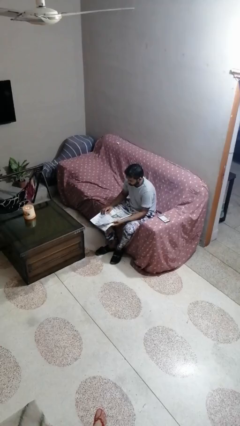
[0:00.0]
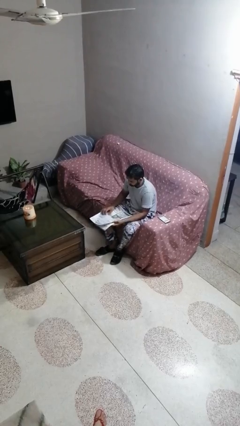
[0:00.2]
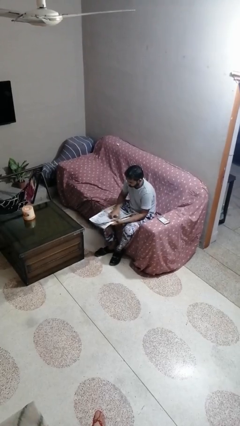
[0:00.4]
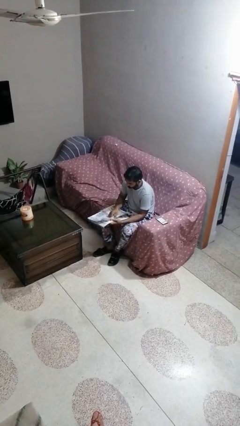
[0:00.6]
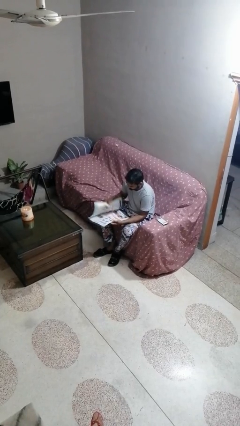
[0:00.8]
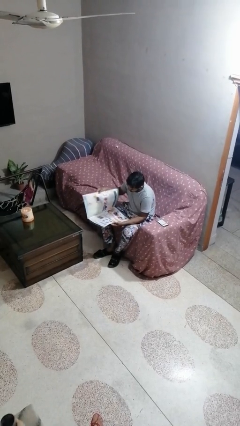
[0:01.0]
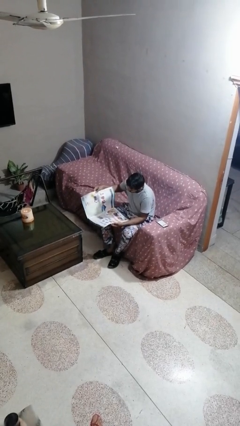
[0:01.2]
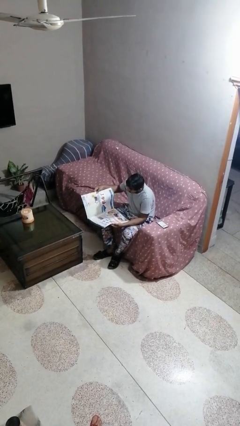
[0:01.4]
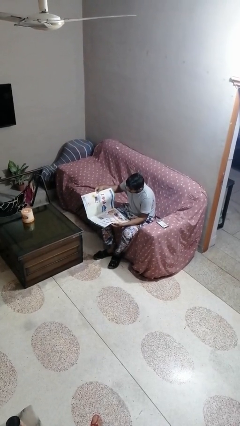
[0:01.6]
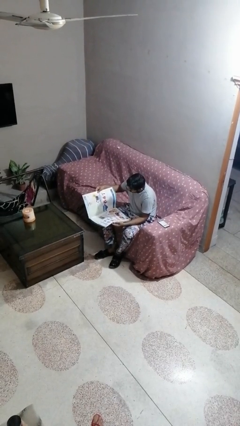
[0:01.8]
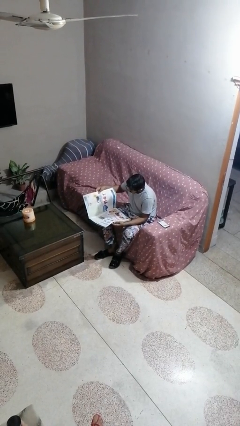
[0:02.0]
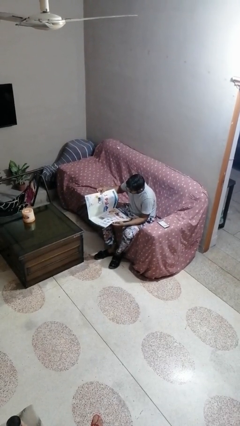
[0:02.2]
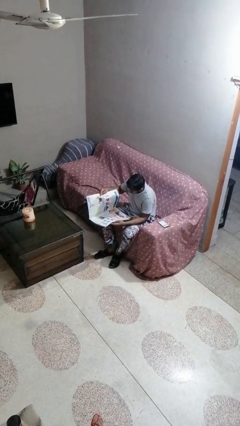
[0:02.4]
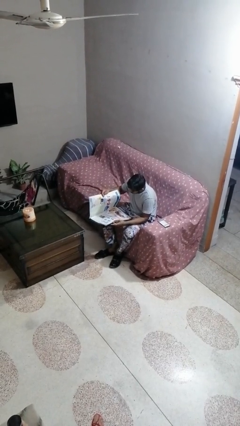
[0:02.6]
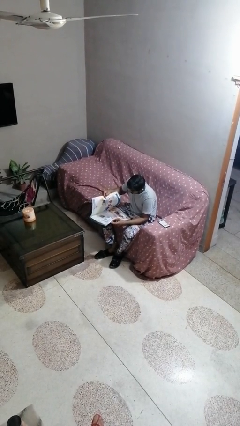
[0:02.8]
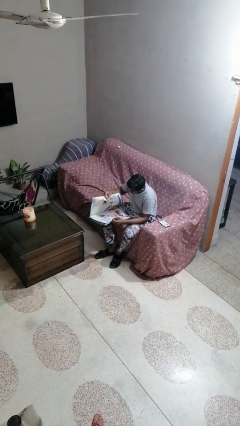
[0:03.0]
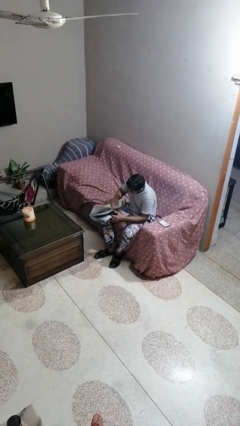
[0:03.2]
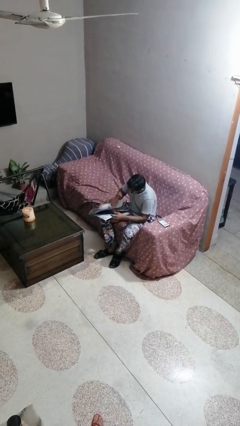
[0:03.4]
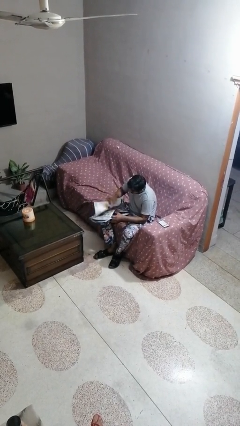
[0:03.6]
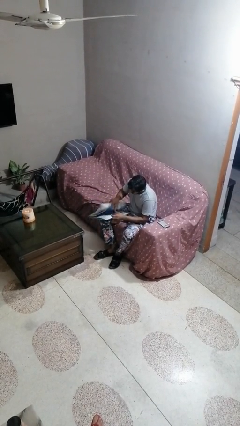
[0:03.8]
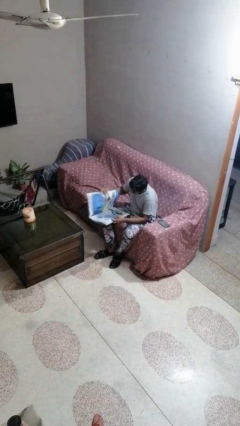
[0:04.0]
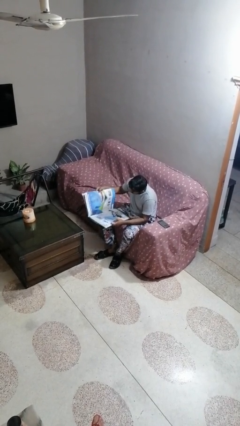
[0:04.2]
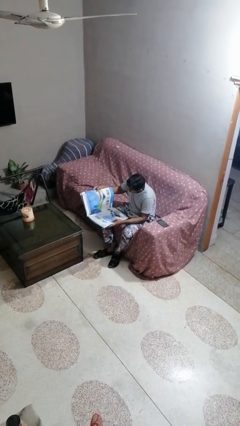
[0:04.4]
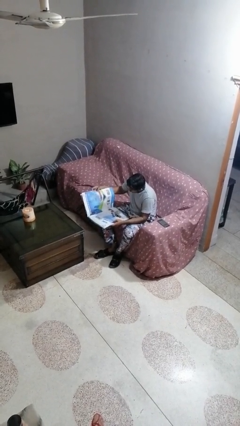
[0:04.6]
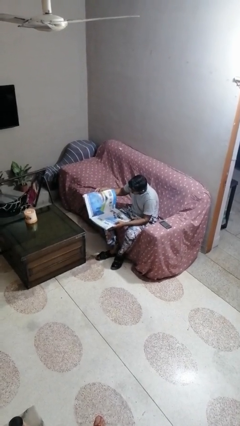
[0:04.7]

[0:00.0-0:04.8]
person reads magazine

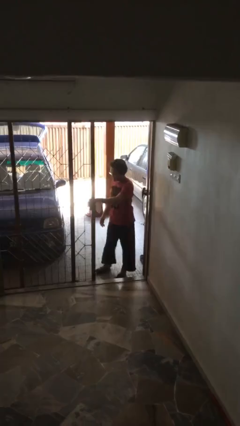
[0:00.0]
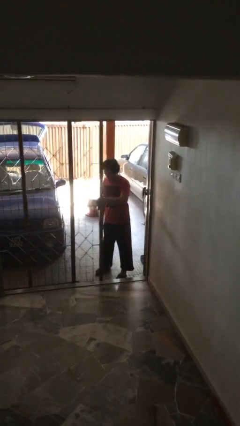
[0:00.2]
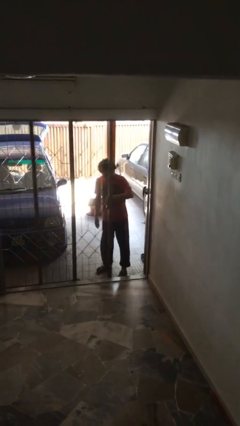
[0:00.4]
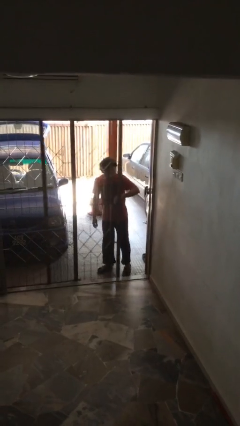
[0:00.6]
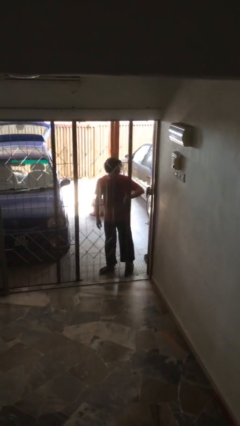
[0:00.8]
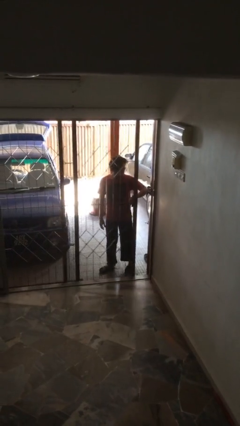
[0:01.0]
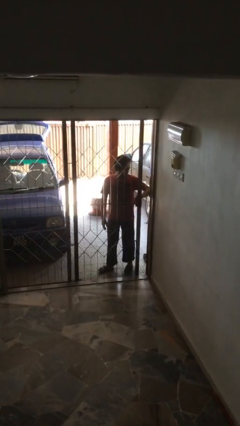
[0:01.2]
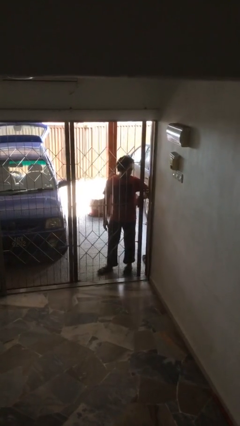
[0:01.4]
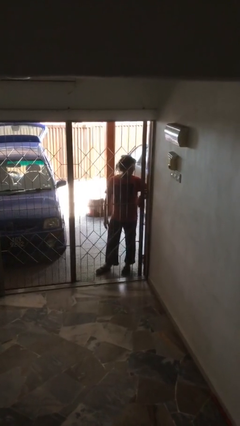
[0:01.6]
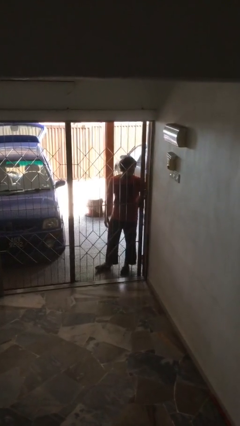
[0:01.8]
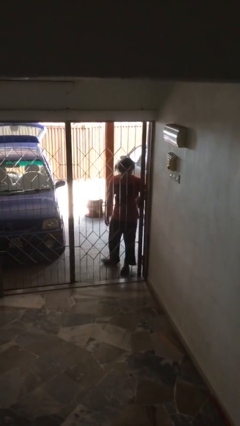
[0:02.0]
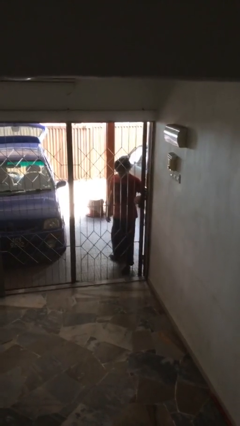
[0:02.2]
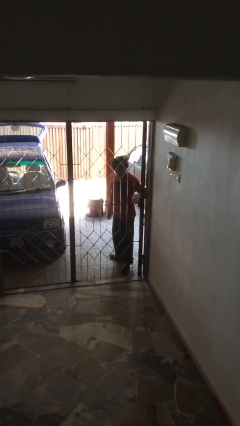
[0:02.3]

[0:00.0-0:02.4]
person closes facility door

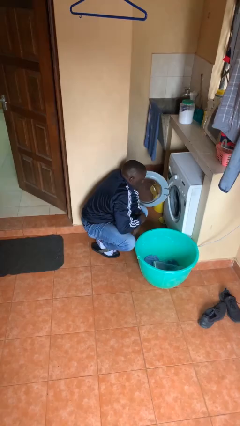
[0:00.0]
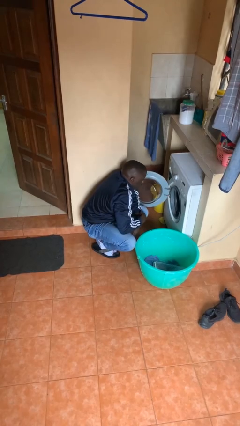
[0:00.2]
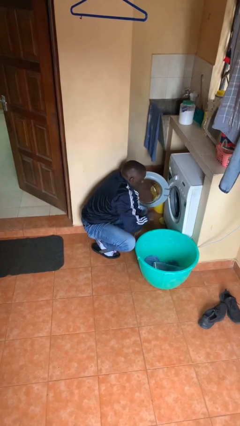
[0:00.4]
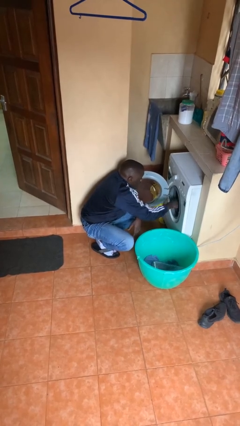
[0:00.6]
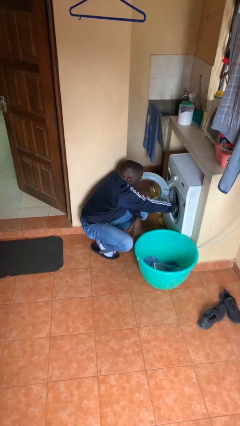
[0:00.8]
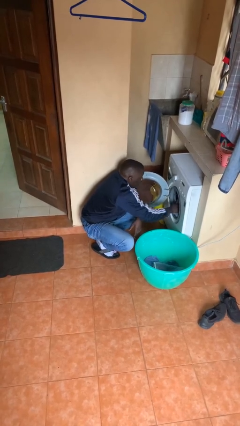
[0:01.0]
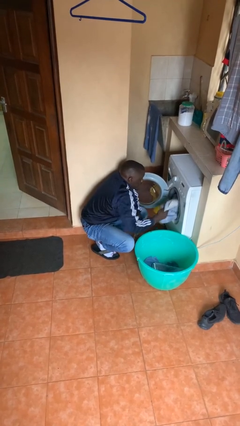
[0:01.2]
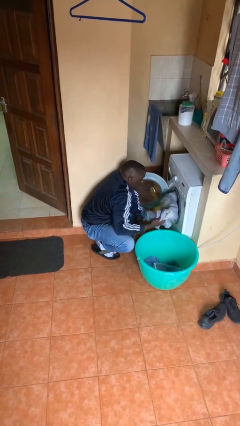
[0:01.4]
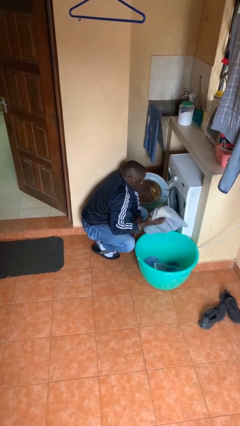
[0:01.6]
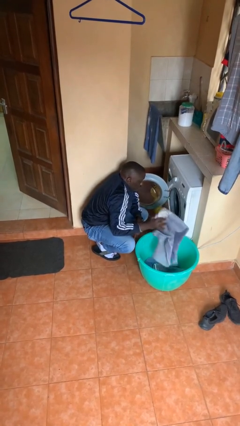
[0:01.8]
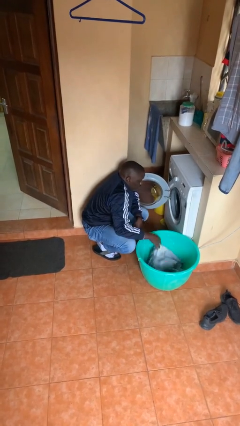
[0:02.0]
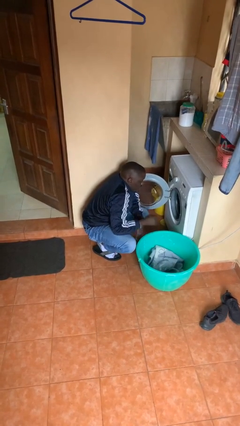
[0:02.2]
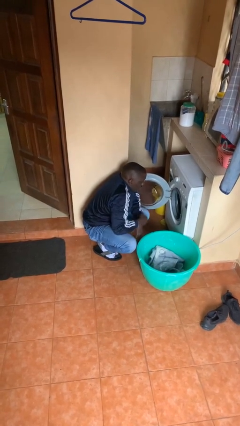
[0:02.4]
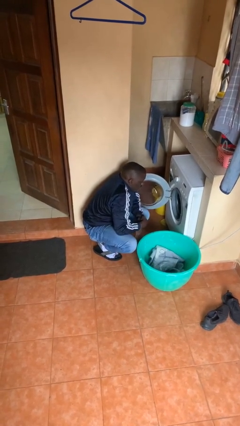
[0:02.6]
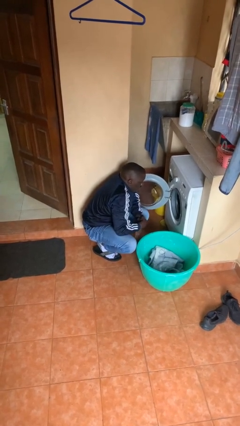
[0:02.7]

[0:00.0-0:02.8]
person loads clotheswasher

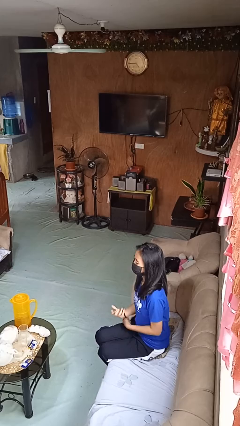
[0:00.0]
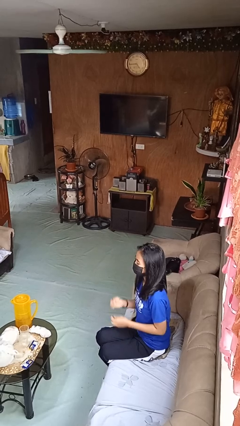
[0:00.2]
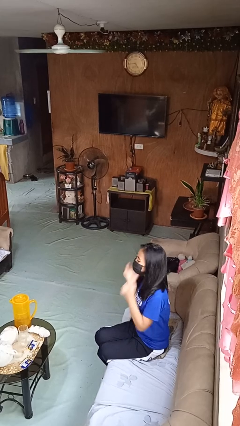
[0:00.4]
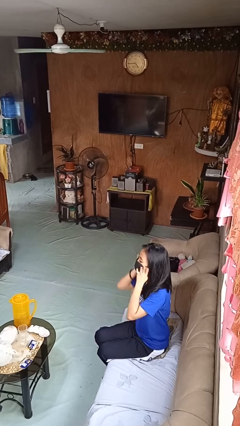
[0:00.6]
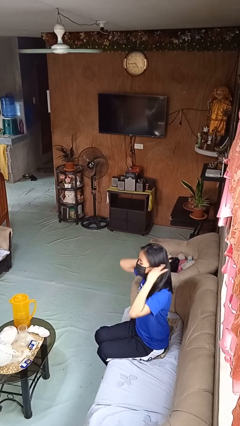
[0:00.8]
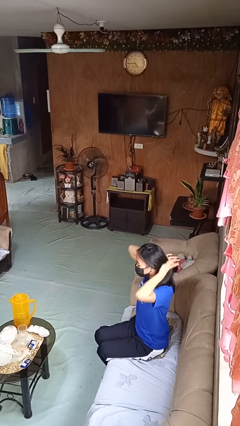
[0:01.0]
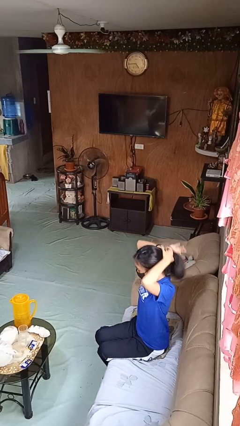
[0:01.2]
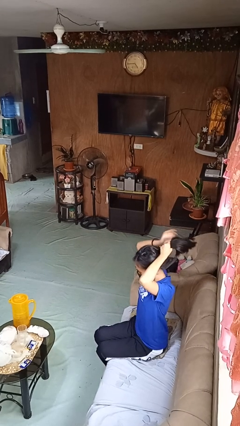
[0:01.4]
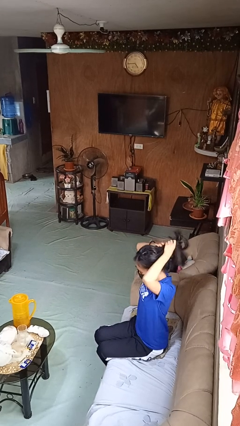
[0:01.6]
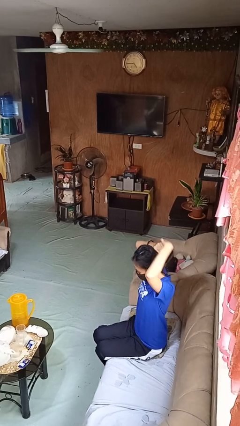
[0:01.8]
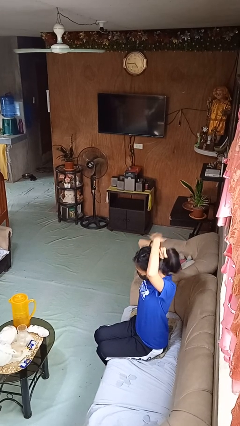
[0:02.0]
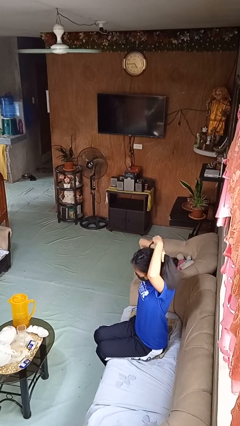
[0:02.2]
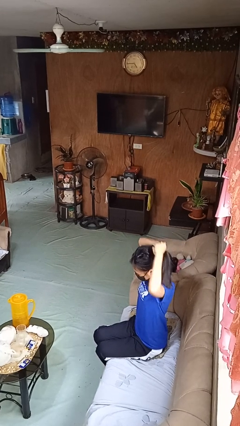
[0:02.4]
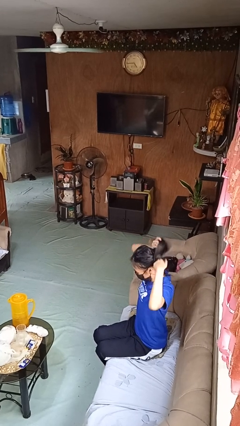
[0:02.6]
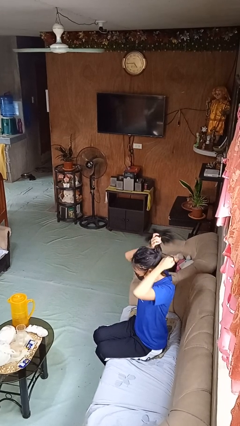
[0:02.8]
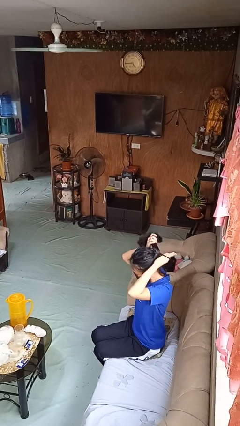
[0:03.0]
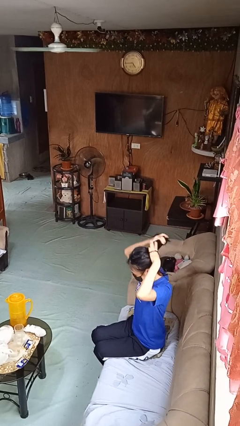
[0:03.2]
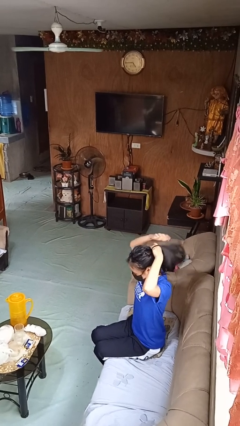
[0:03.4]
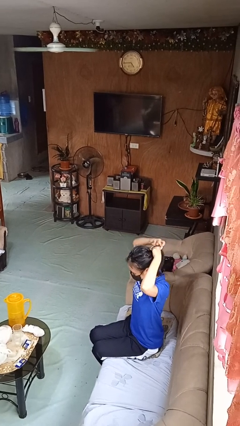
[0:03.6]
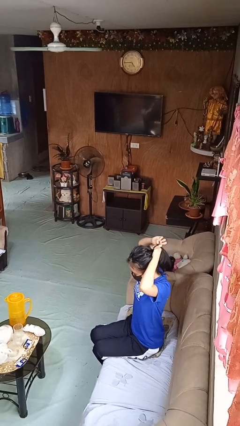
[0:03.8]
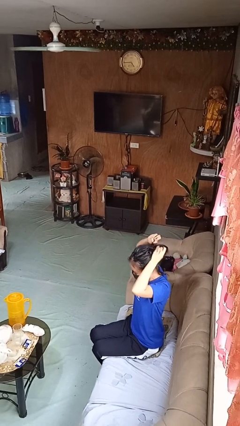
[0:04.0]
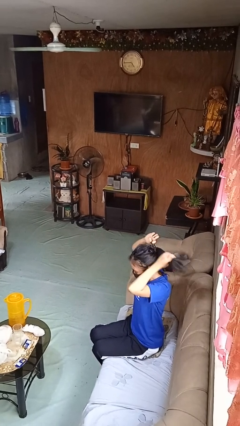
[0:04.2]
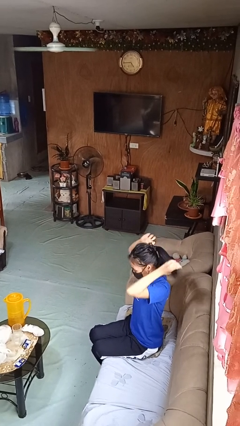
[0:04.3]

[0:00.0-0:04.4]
person puts hair in ponytail

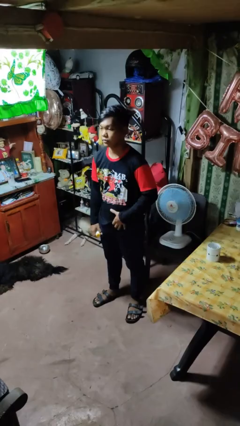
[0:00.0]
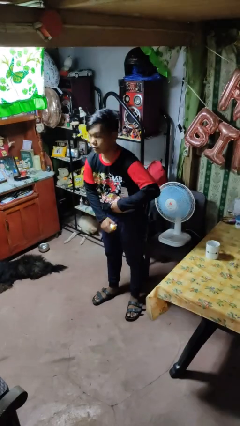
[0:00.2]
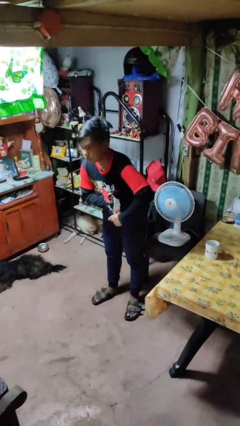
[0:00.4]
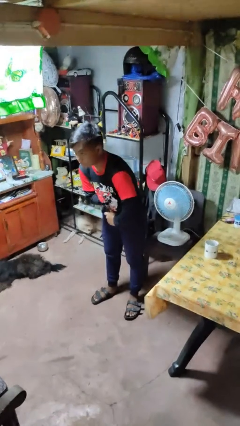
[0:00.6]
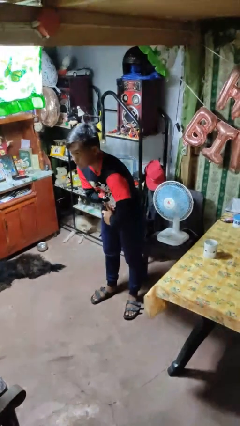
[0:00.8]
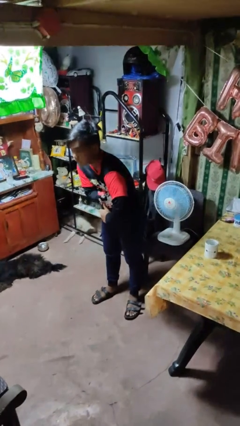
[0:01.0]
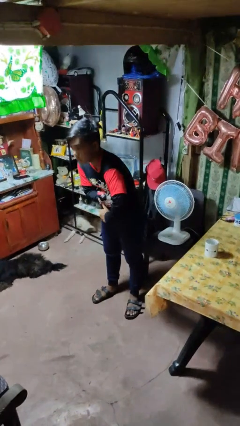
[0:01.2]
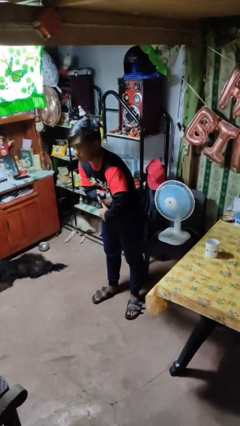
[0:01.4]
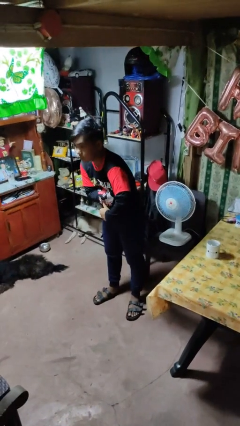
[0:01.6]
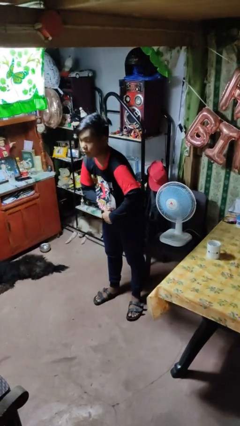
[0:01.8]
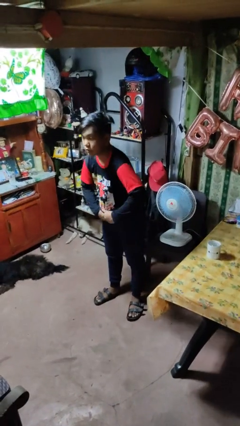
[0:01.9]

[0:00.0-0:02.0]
person applies deodorant

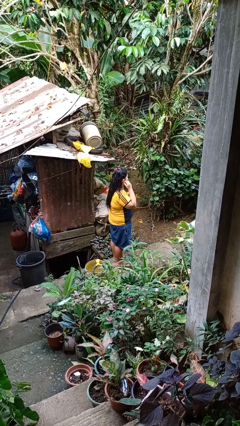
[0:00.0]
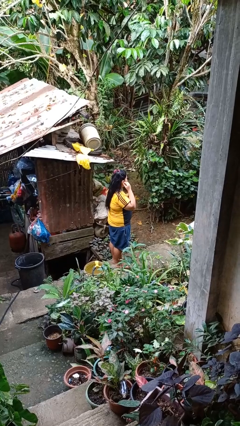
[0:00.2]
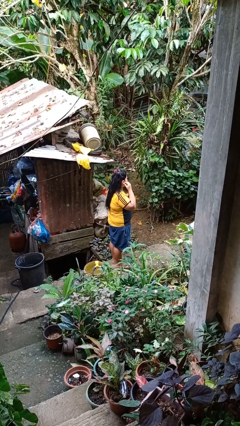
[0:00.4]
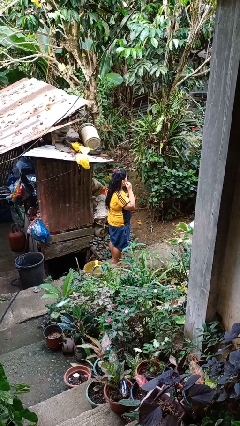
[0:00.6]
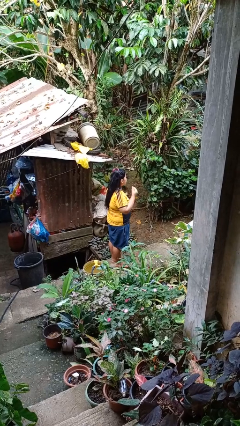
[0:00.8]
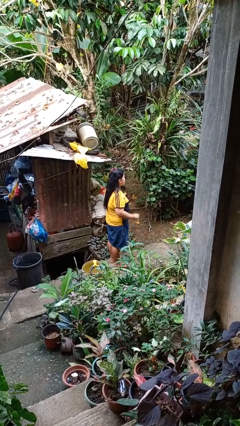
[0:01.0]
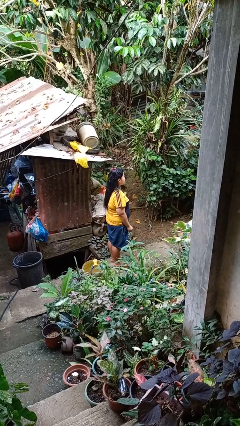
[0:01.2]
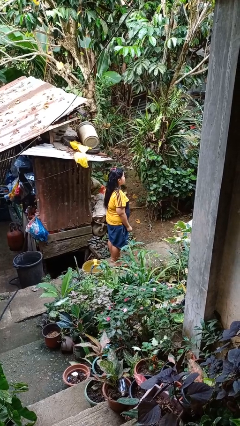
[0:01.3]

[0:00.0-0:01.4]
person takes off earrings
